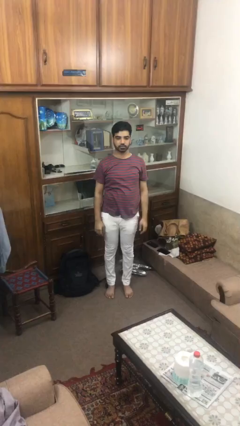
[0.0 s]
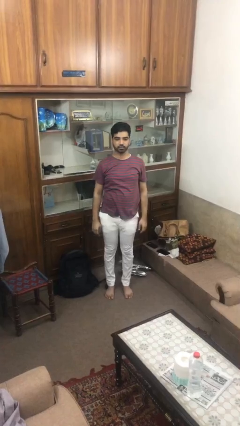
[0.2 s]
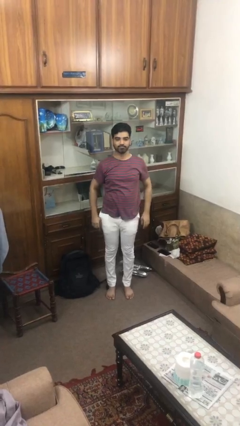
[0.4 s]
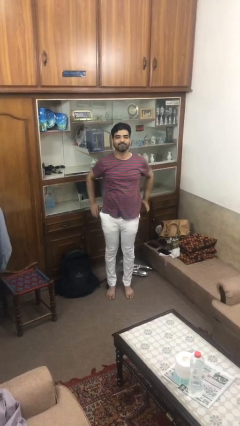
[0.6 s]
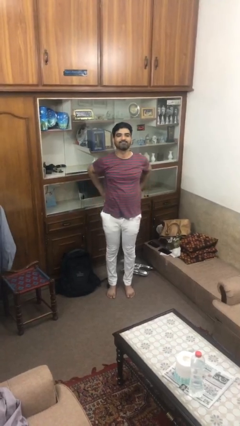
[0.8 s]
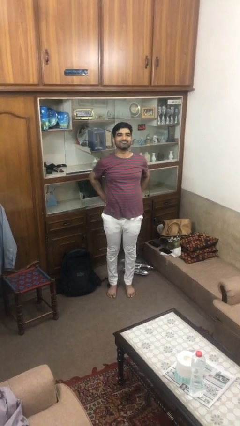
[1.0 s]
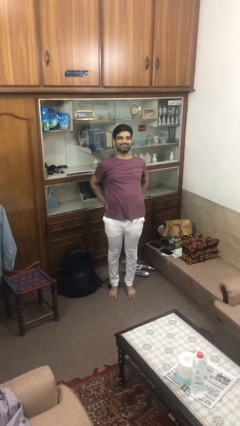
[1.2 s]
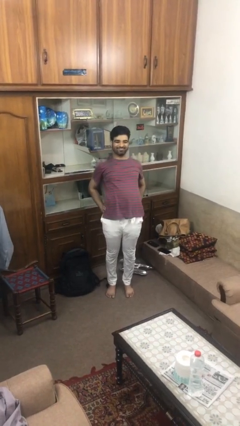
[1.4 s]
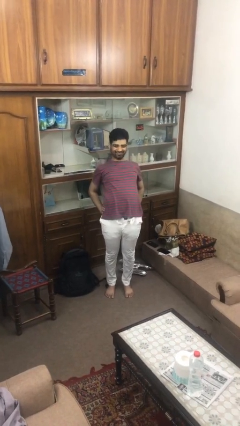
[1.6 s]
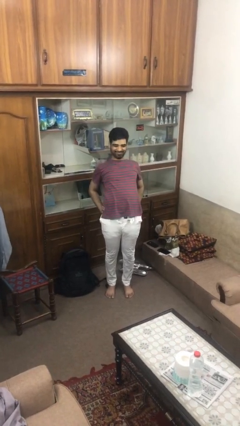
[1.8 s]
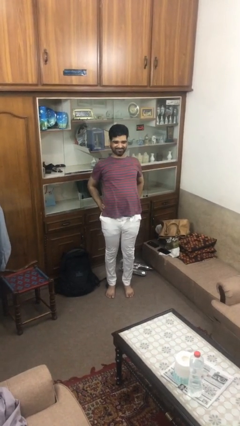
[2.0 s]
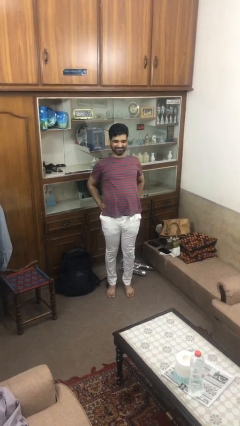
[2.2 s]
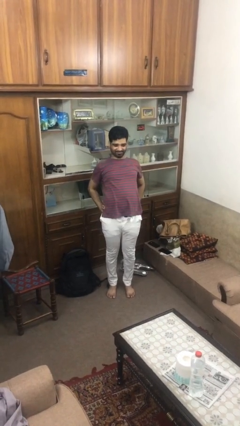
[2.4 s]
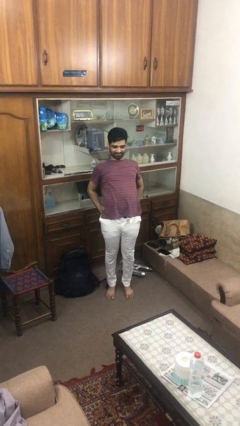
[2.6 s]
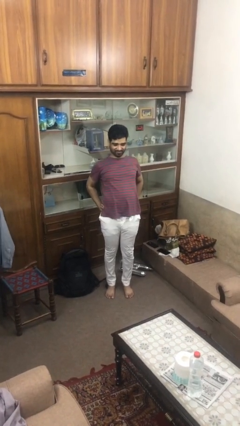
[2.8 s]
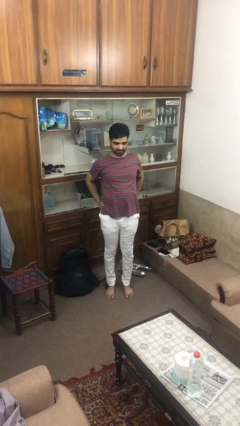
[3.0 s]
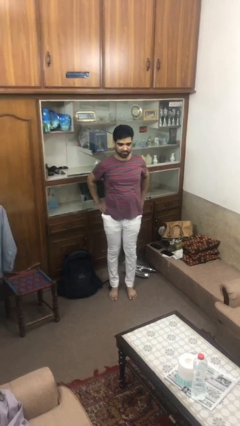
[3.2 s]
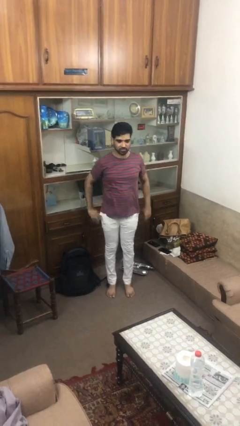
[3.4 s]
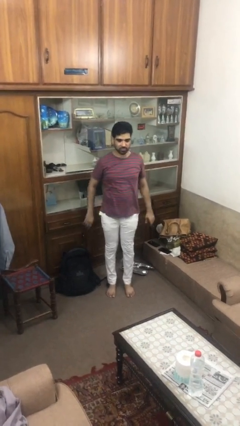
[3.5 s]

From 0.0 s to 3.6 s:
person stretches back

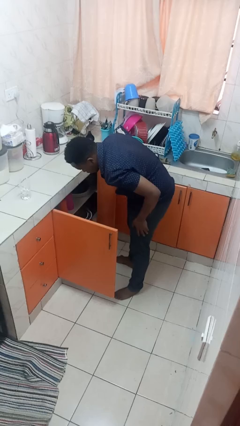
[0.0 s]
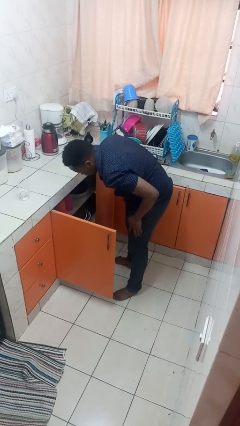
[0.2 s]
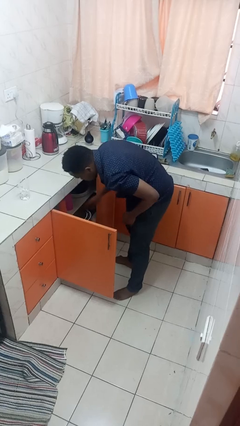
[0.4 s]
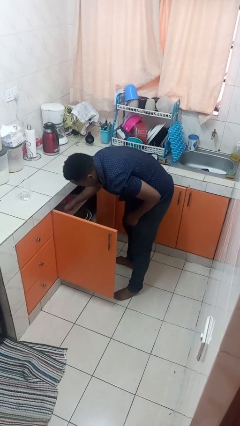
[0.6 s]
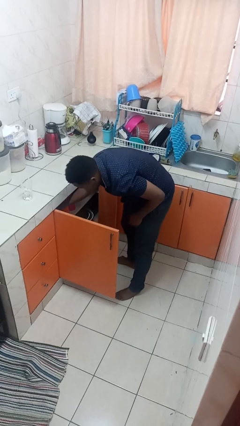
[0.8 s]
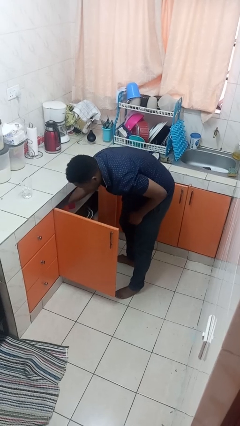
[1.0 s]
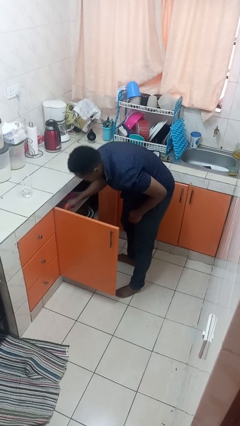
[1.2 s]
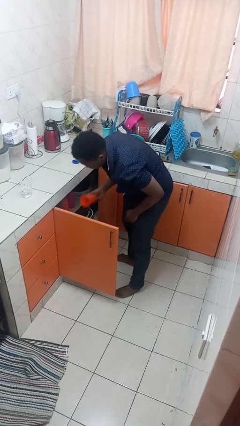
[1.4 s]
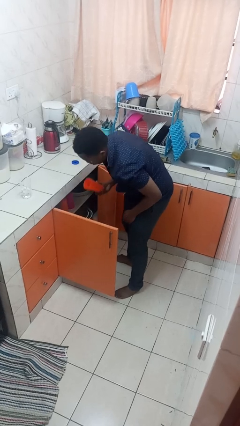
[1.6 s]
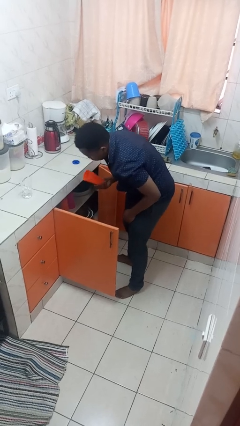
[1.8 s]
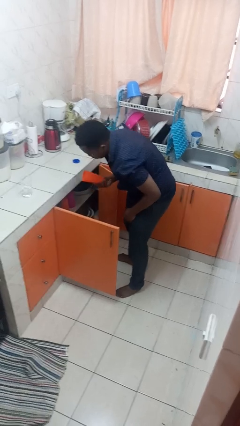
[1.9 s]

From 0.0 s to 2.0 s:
person takes object from cabinet

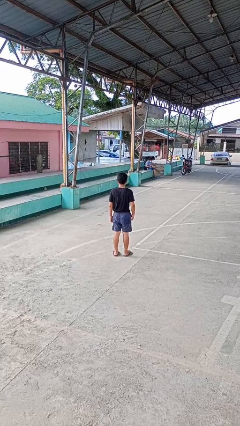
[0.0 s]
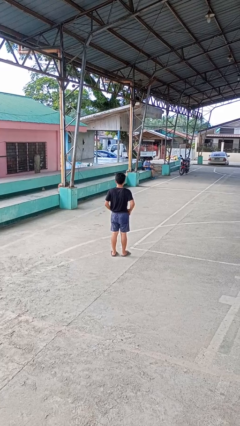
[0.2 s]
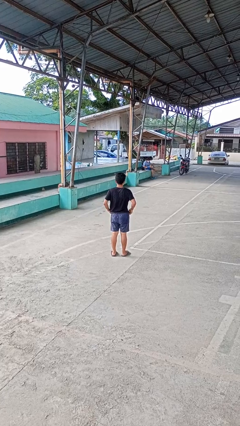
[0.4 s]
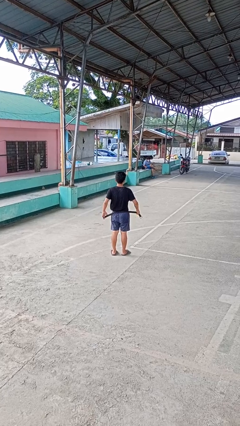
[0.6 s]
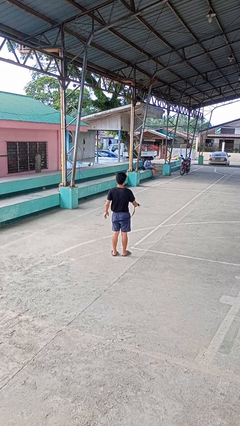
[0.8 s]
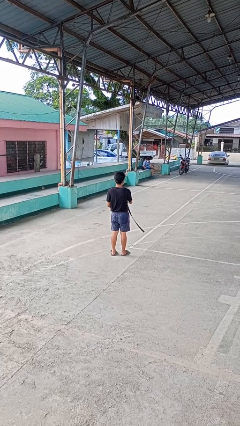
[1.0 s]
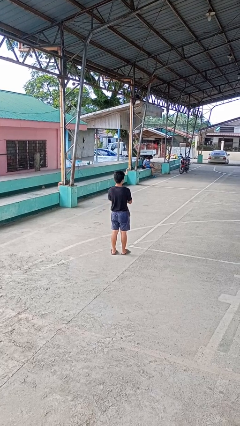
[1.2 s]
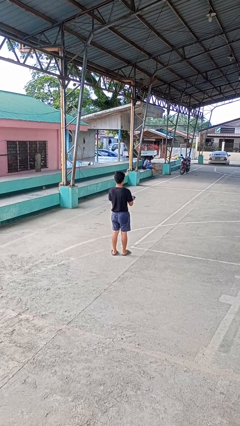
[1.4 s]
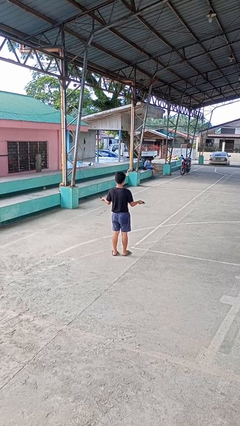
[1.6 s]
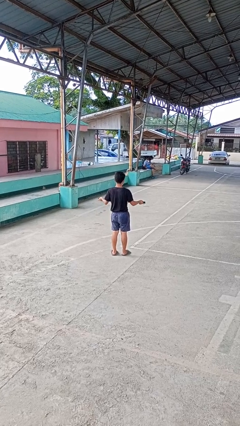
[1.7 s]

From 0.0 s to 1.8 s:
person takes off belt

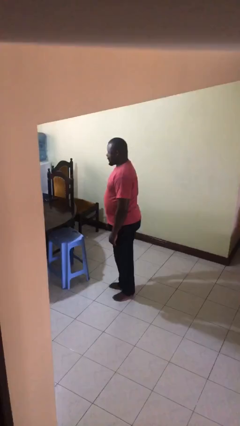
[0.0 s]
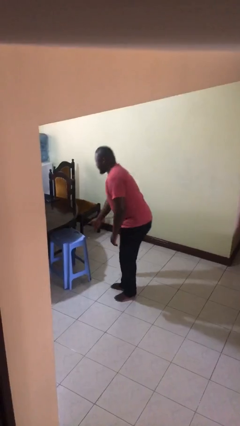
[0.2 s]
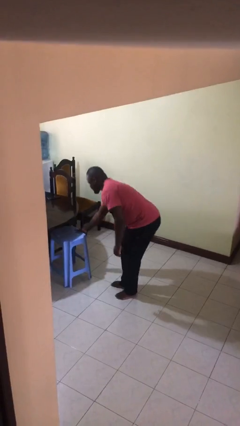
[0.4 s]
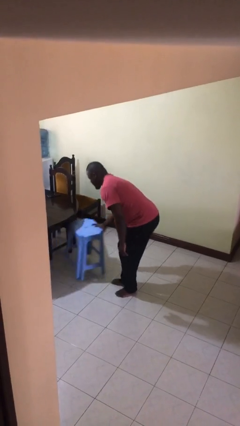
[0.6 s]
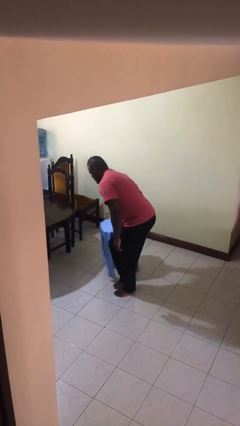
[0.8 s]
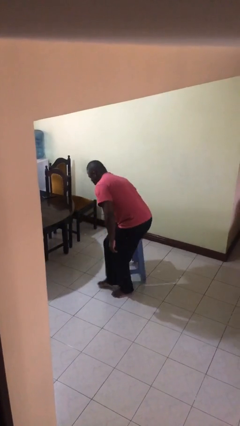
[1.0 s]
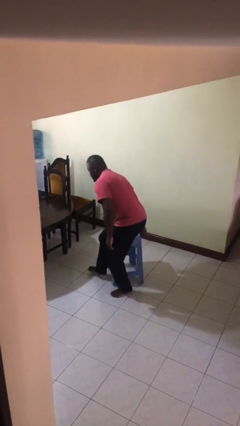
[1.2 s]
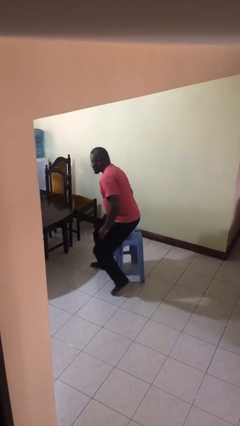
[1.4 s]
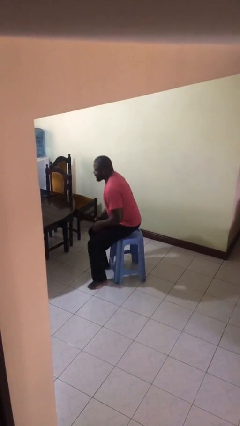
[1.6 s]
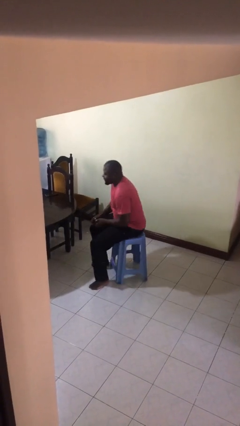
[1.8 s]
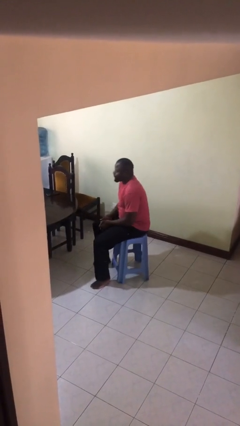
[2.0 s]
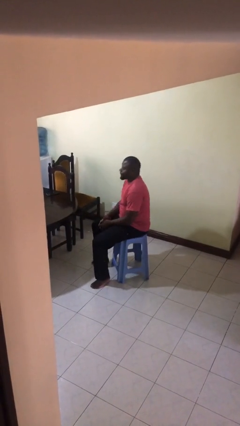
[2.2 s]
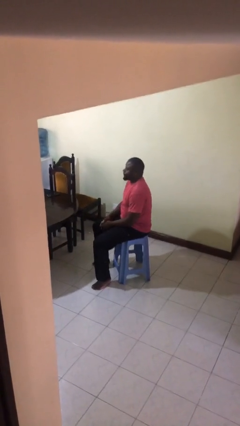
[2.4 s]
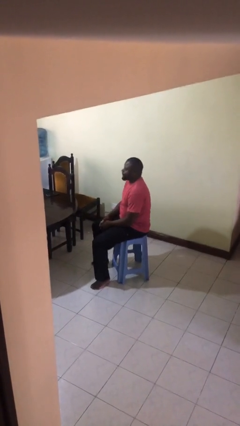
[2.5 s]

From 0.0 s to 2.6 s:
person sits down

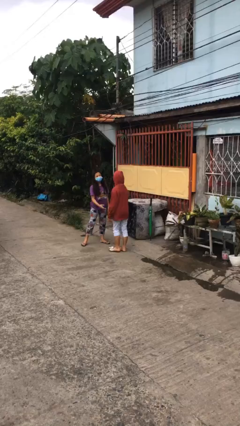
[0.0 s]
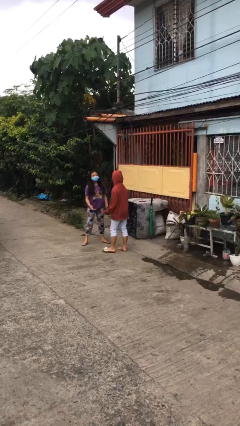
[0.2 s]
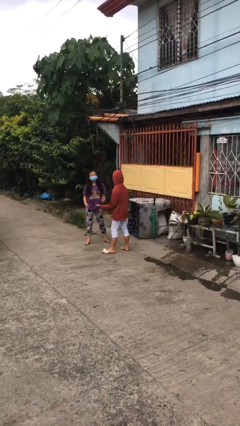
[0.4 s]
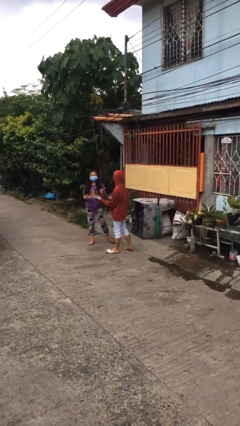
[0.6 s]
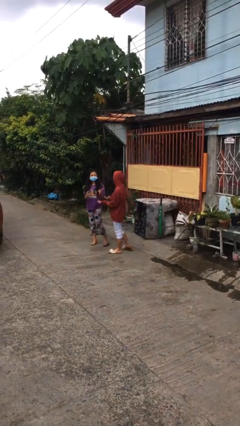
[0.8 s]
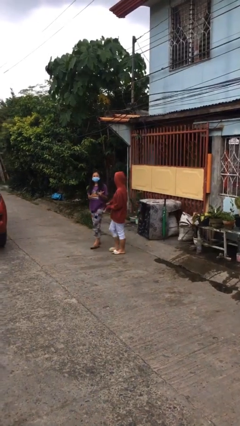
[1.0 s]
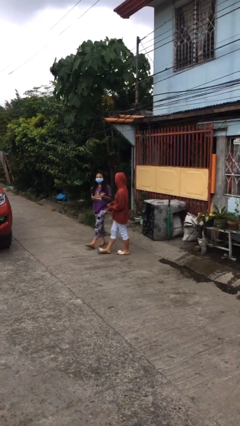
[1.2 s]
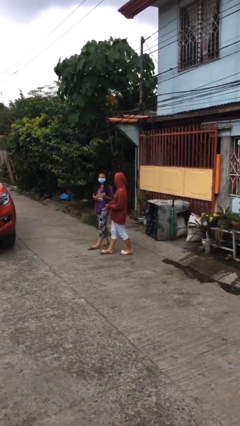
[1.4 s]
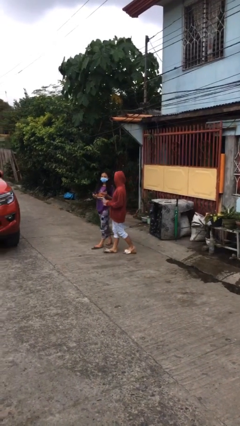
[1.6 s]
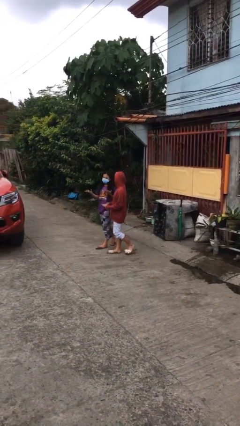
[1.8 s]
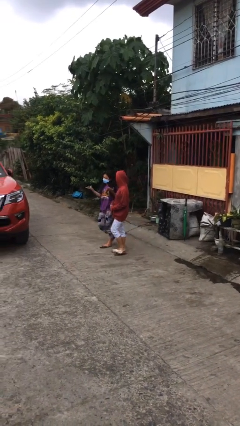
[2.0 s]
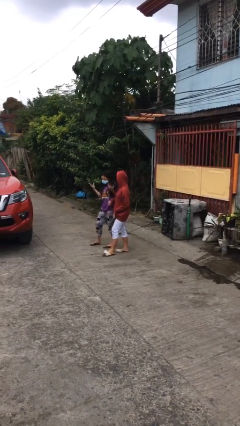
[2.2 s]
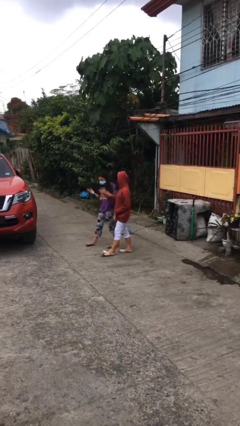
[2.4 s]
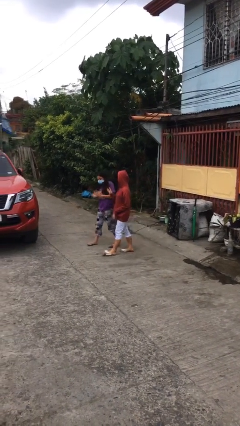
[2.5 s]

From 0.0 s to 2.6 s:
person talks to person

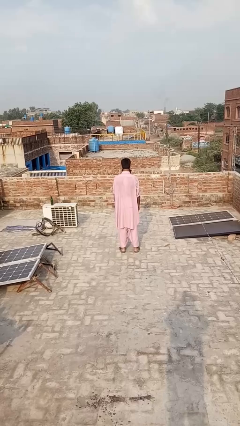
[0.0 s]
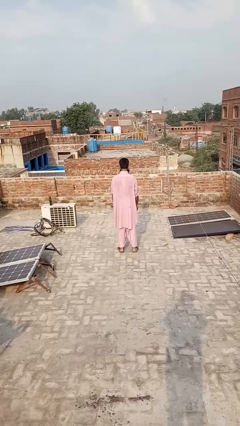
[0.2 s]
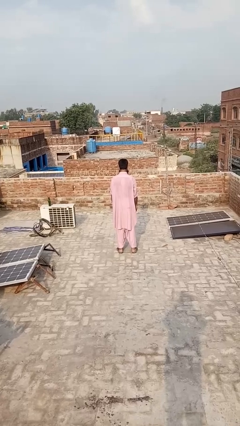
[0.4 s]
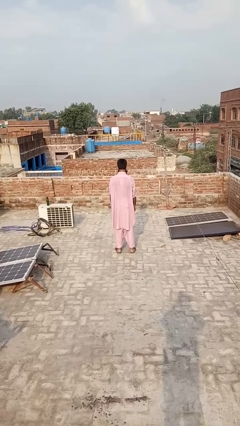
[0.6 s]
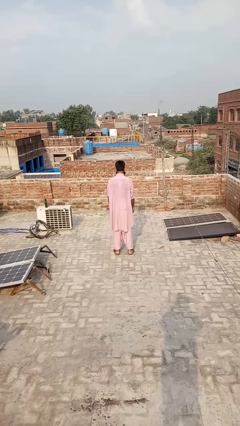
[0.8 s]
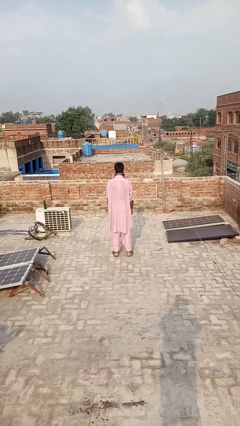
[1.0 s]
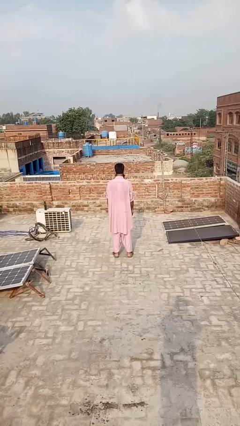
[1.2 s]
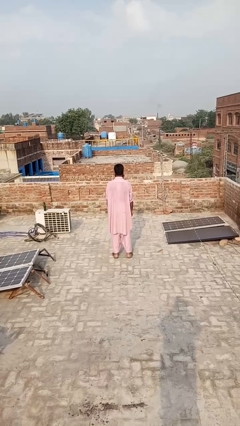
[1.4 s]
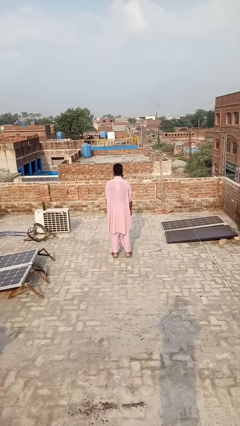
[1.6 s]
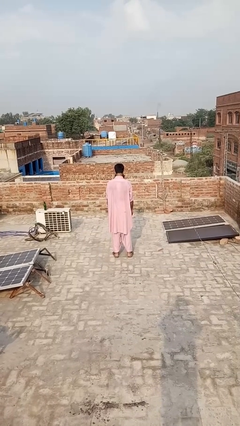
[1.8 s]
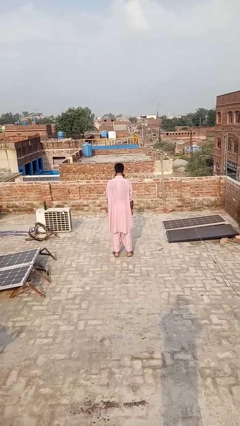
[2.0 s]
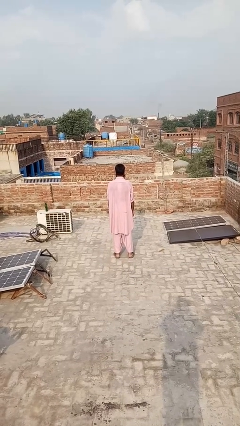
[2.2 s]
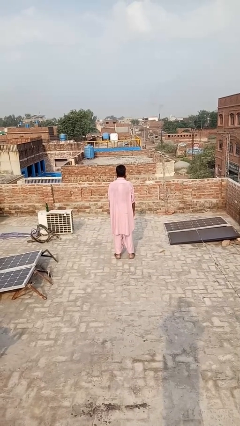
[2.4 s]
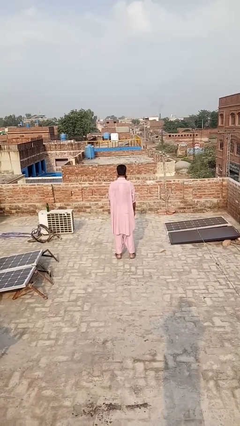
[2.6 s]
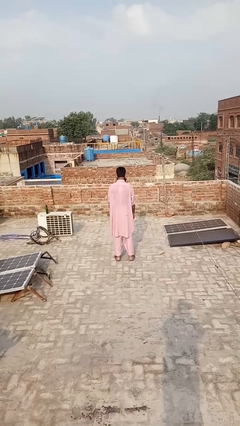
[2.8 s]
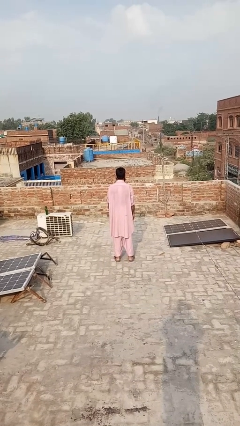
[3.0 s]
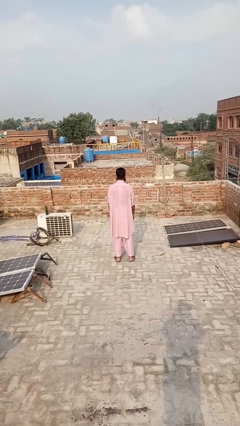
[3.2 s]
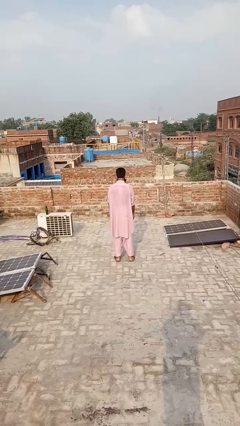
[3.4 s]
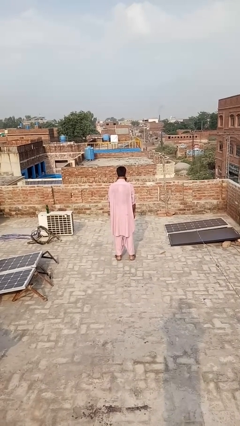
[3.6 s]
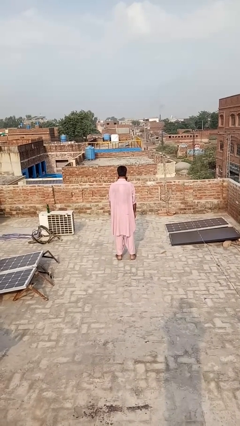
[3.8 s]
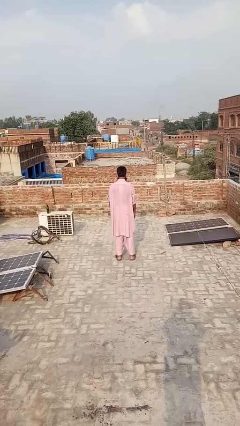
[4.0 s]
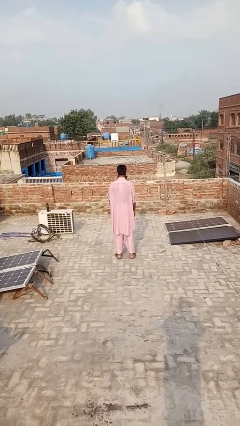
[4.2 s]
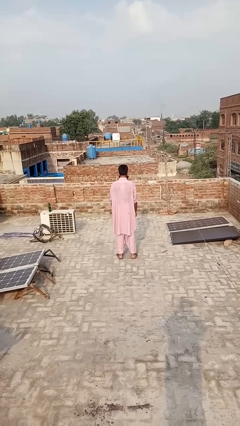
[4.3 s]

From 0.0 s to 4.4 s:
person nods head

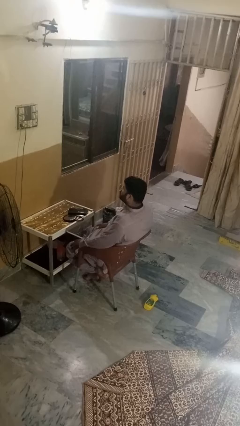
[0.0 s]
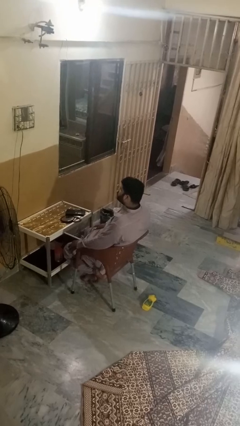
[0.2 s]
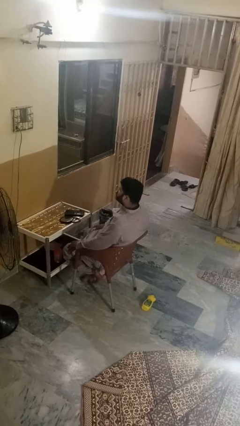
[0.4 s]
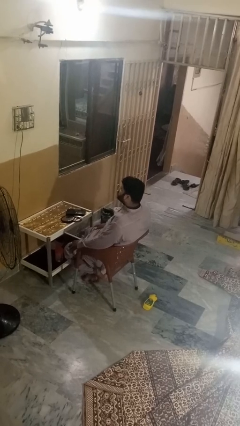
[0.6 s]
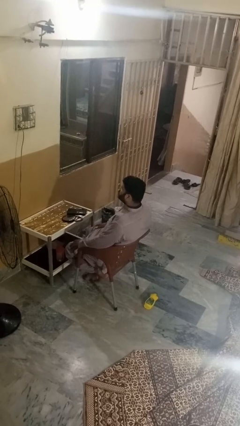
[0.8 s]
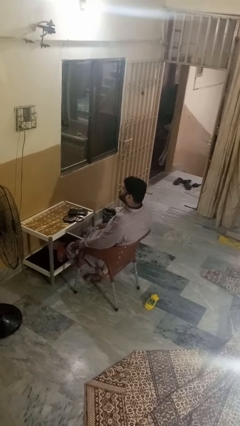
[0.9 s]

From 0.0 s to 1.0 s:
person licks fingers
